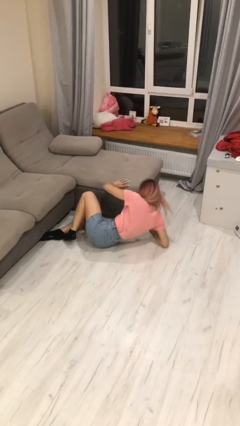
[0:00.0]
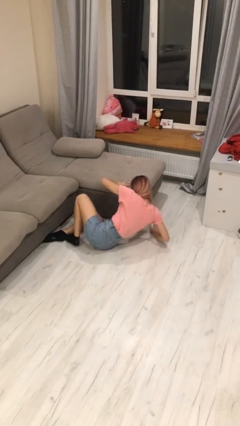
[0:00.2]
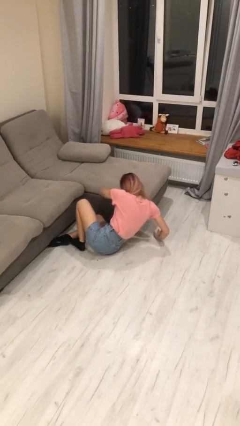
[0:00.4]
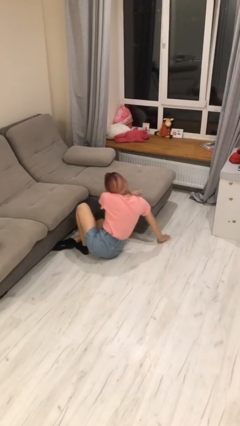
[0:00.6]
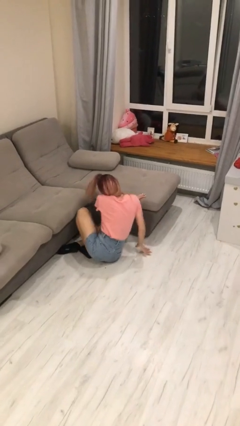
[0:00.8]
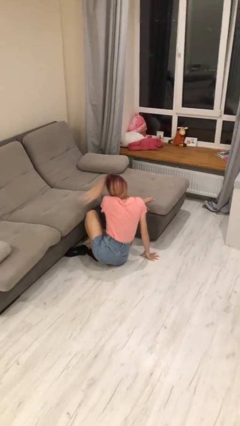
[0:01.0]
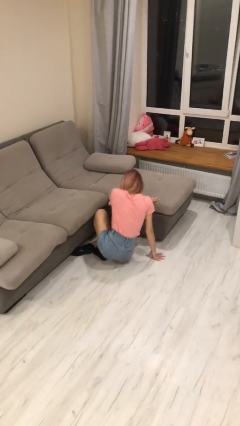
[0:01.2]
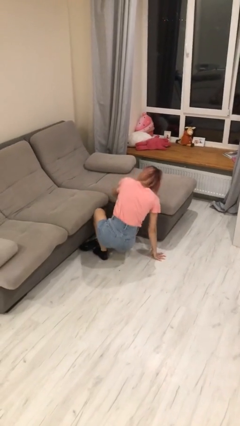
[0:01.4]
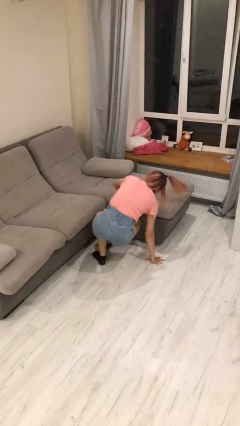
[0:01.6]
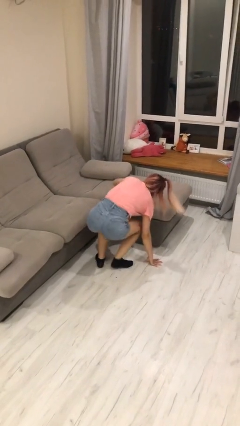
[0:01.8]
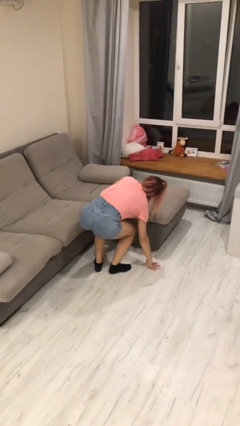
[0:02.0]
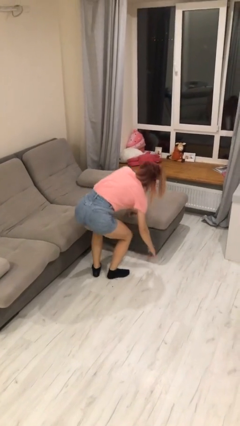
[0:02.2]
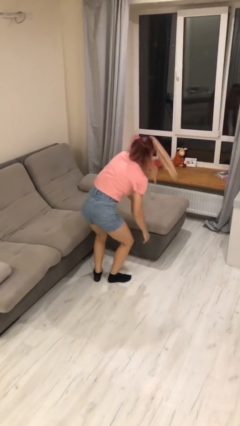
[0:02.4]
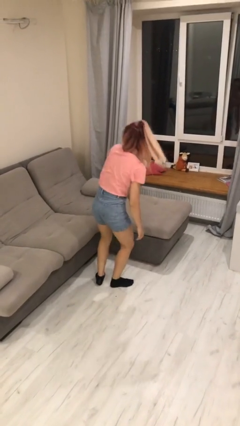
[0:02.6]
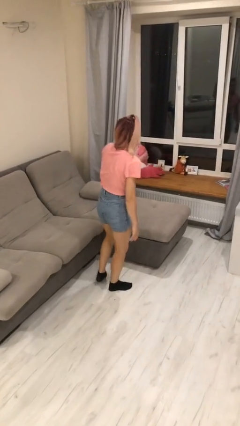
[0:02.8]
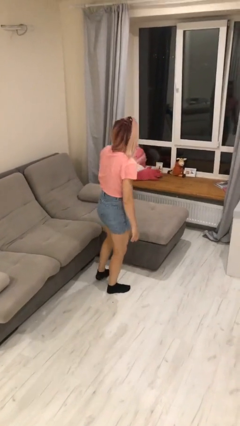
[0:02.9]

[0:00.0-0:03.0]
person stands up from floor

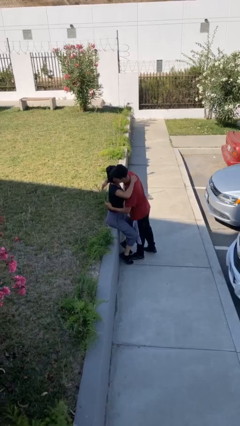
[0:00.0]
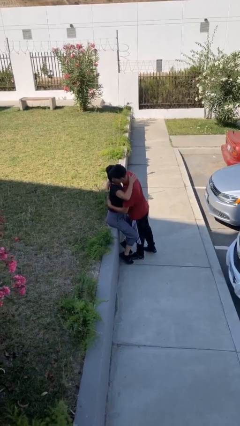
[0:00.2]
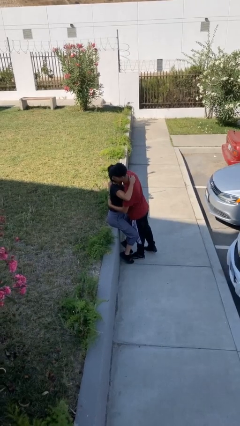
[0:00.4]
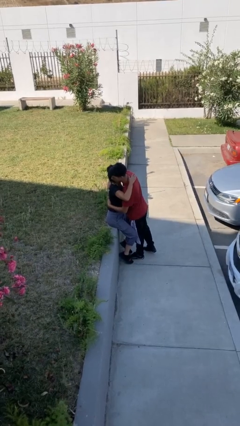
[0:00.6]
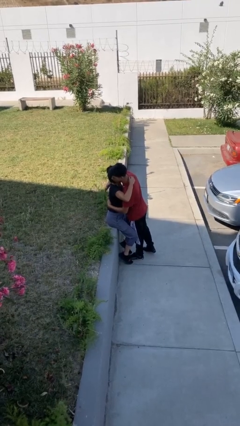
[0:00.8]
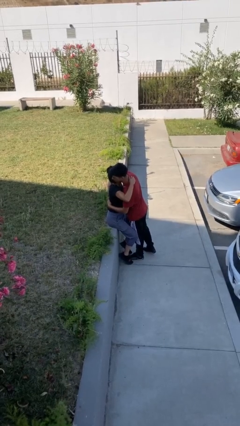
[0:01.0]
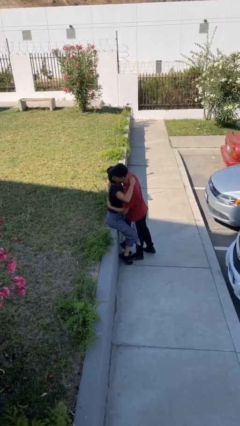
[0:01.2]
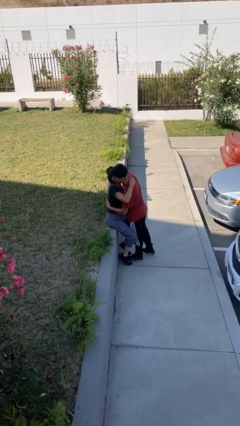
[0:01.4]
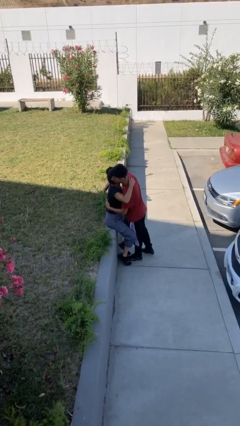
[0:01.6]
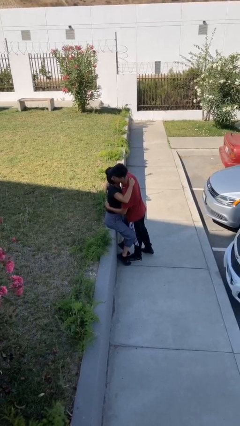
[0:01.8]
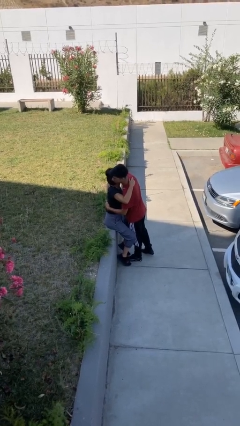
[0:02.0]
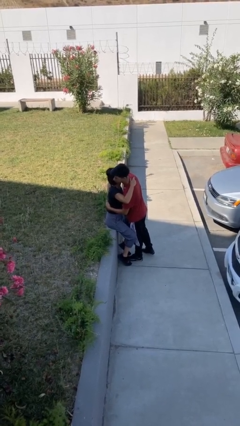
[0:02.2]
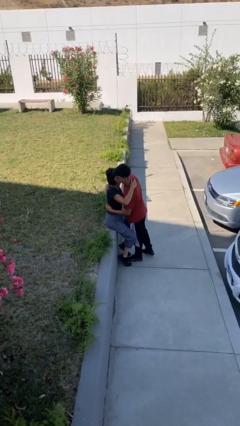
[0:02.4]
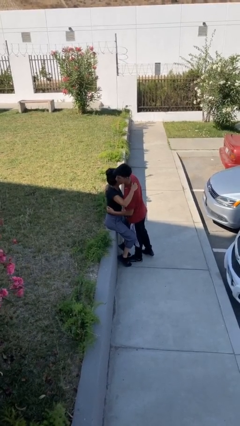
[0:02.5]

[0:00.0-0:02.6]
person embraces person

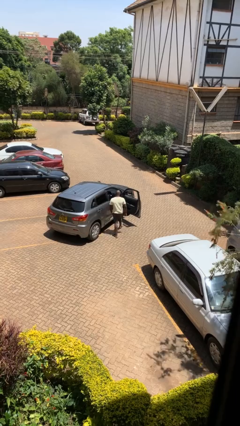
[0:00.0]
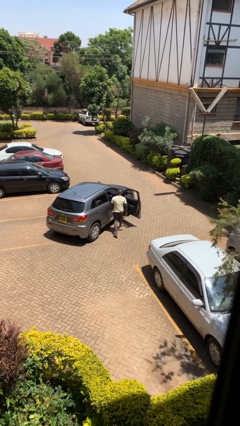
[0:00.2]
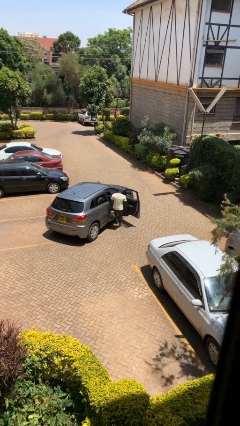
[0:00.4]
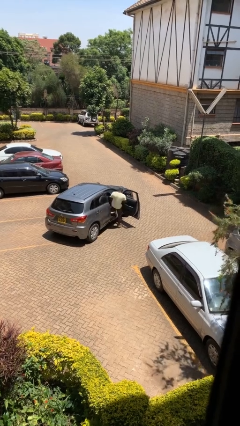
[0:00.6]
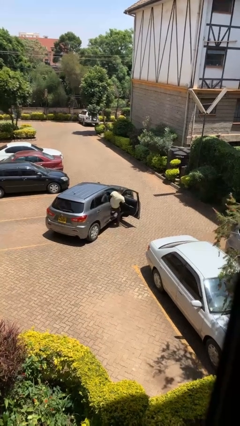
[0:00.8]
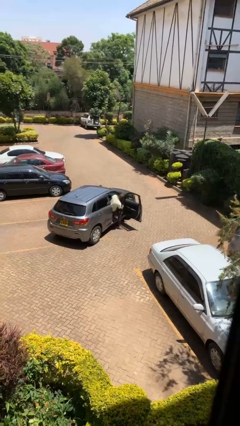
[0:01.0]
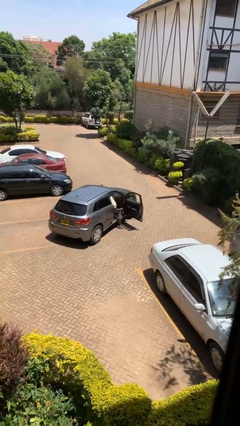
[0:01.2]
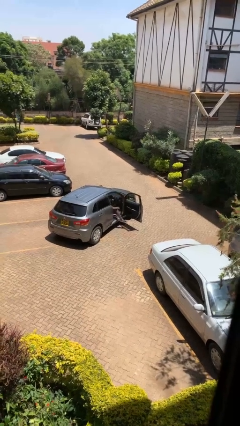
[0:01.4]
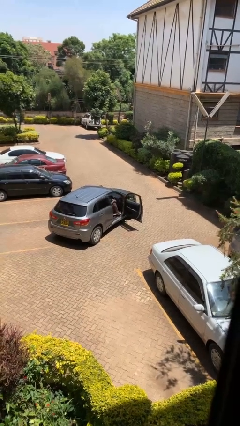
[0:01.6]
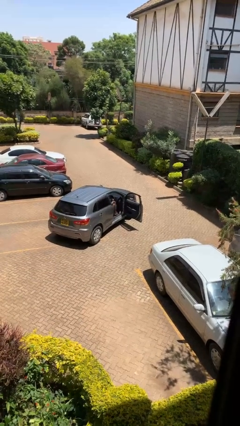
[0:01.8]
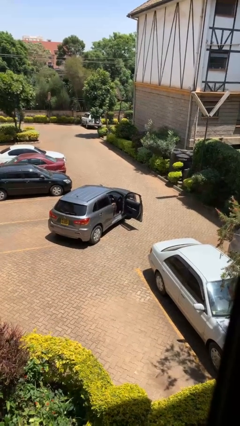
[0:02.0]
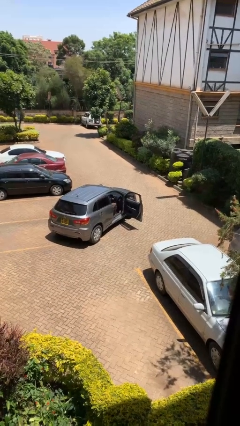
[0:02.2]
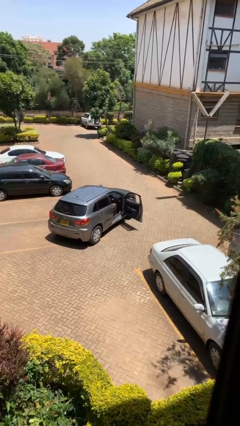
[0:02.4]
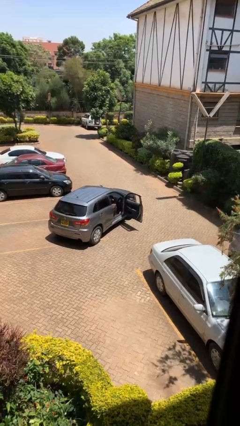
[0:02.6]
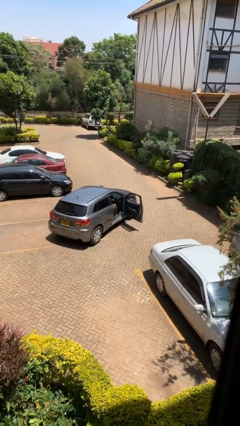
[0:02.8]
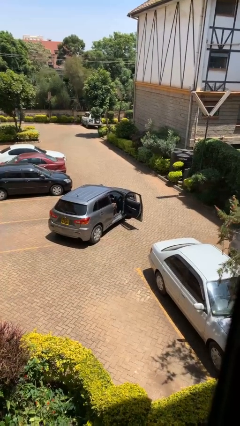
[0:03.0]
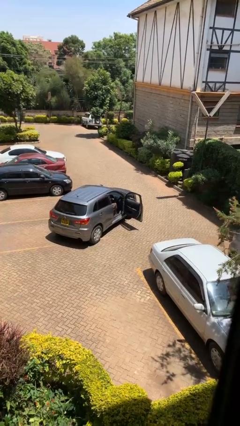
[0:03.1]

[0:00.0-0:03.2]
person enters car

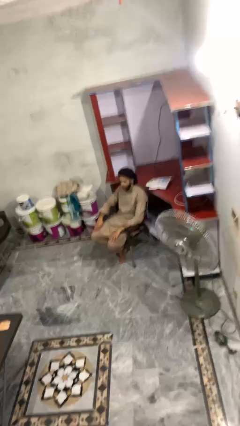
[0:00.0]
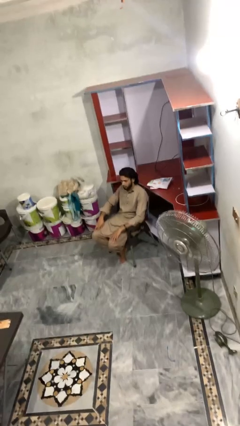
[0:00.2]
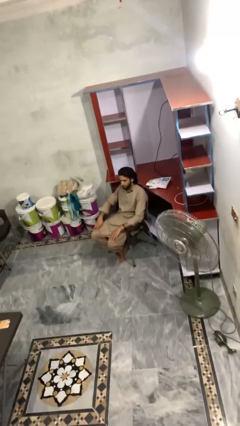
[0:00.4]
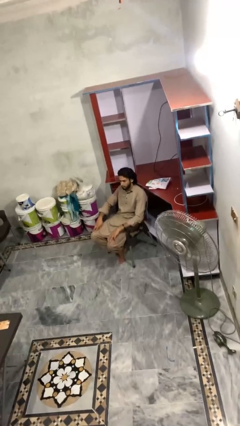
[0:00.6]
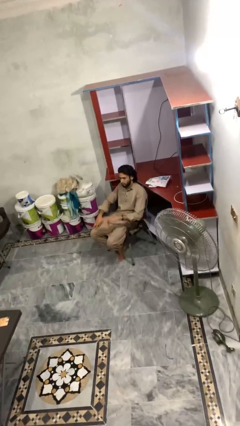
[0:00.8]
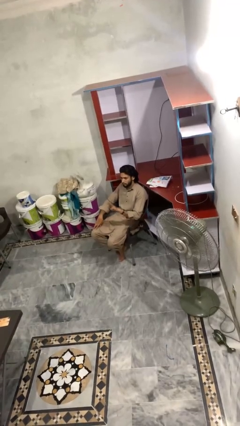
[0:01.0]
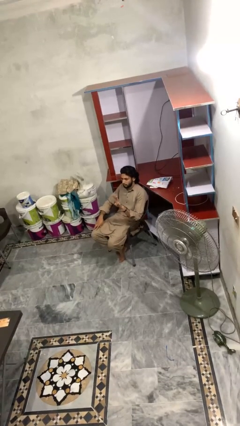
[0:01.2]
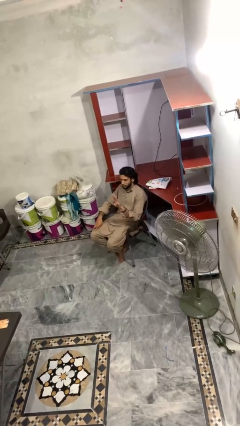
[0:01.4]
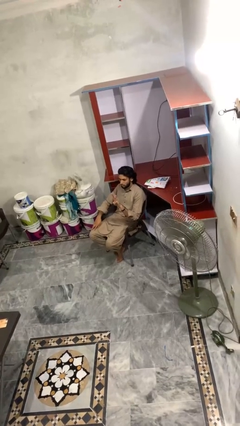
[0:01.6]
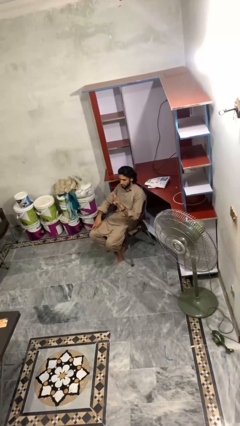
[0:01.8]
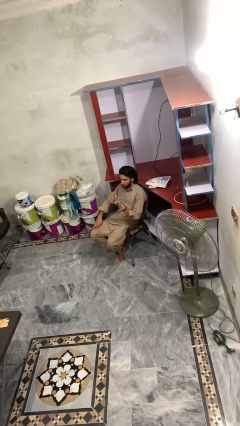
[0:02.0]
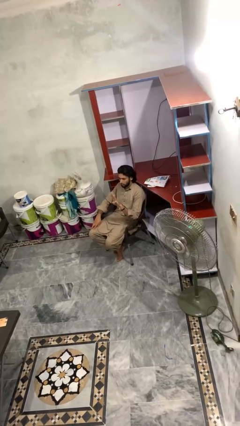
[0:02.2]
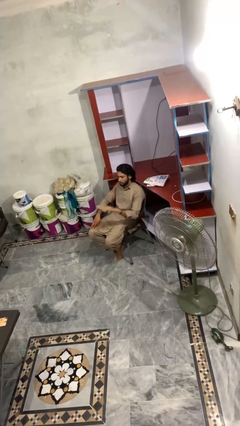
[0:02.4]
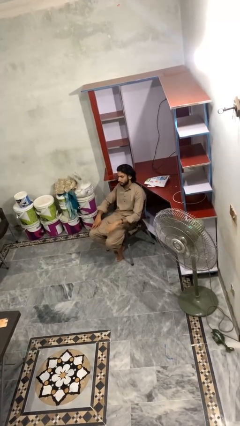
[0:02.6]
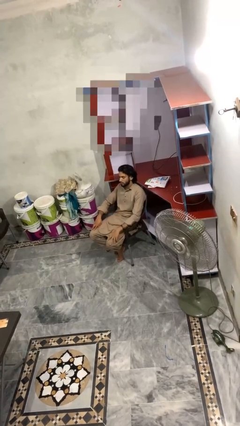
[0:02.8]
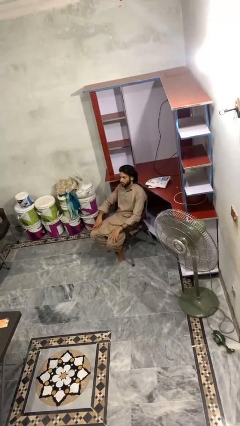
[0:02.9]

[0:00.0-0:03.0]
person gestures number three

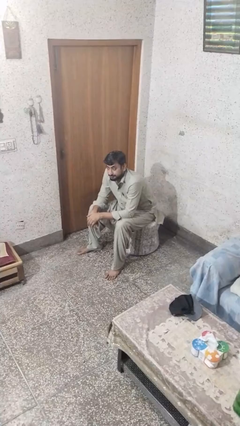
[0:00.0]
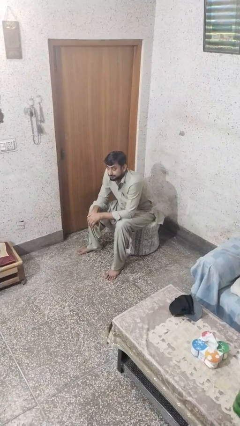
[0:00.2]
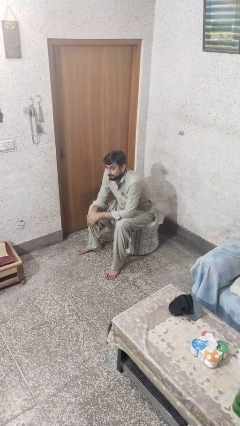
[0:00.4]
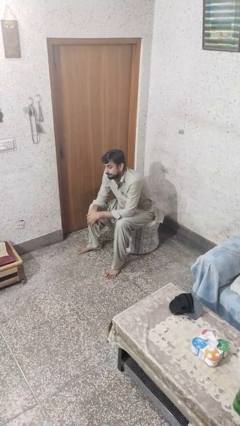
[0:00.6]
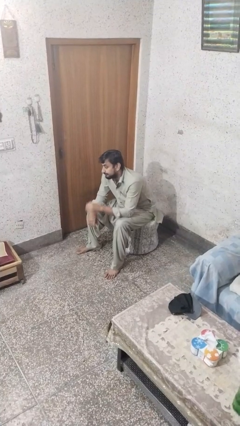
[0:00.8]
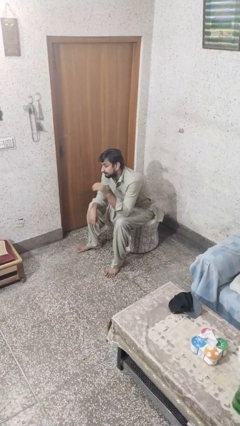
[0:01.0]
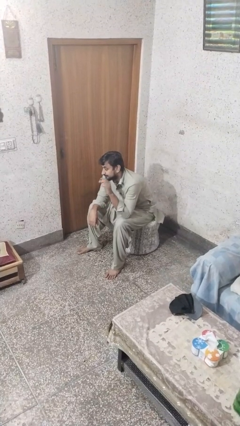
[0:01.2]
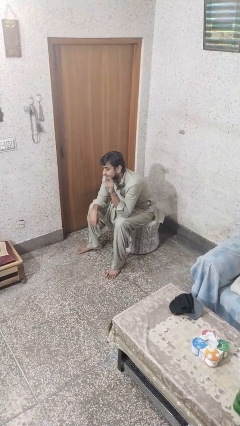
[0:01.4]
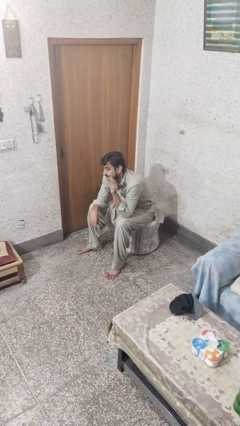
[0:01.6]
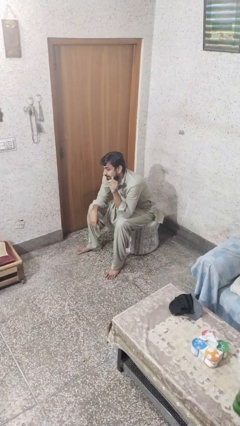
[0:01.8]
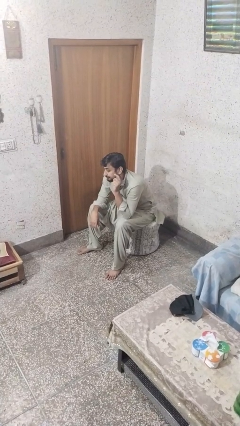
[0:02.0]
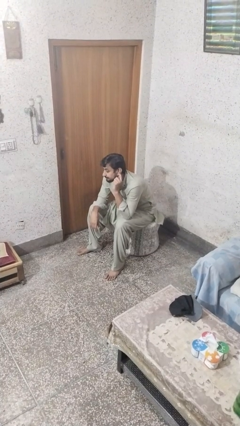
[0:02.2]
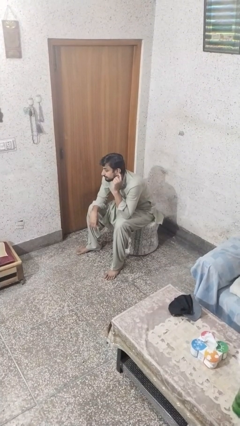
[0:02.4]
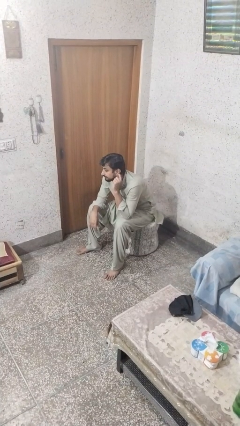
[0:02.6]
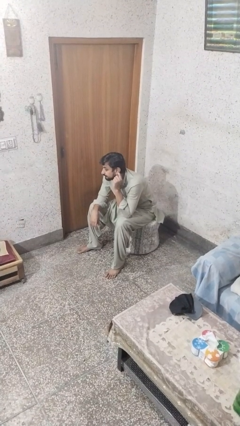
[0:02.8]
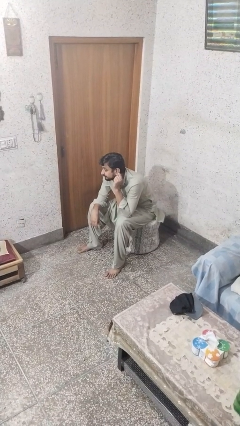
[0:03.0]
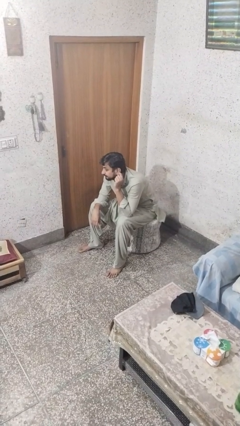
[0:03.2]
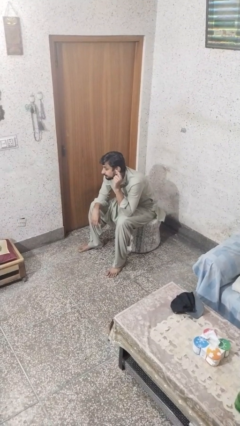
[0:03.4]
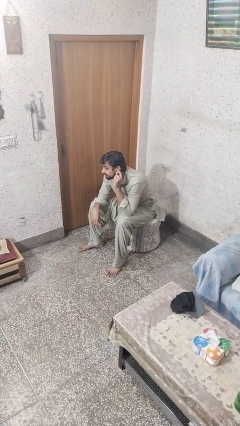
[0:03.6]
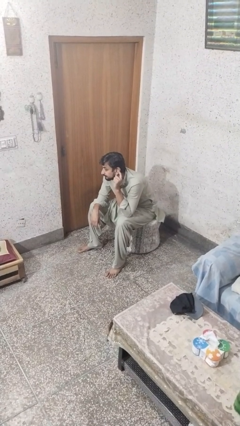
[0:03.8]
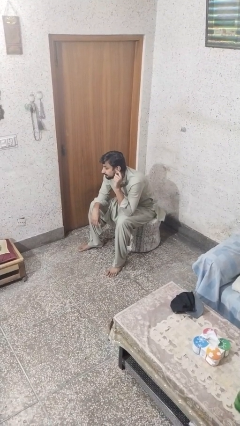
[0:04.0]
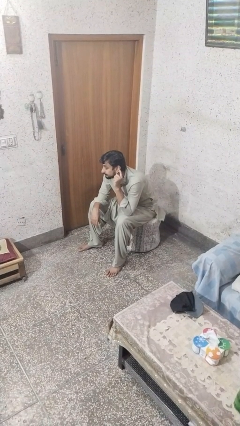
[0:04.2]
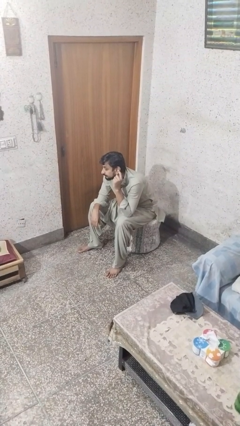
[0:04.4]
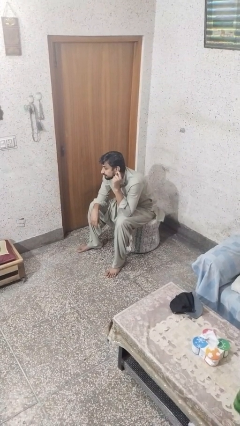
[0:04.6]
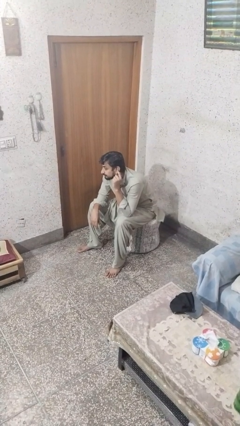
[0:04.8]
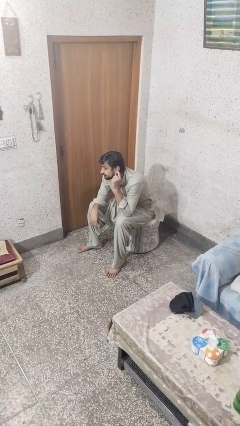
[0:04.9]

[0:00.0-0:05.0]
person gestures listen closely

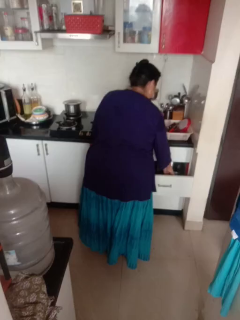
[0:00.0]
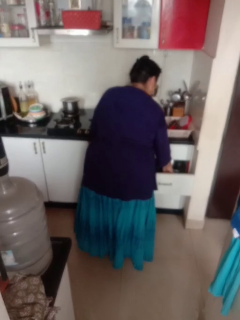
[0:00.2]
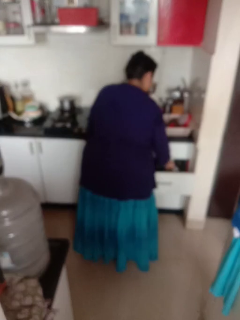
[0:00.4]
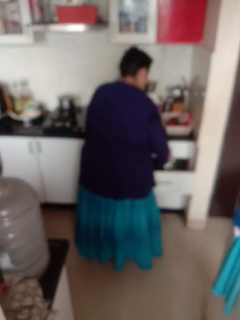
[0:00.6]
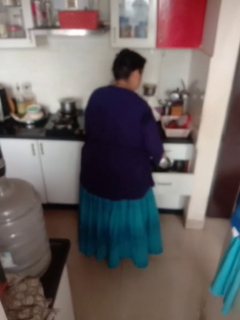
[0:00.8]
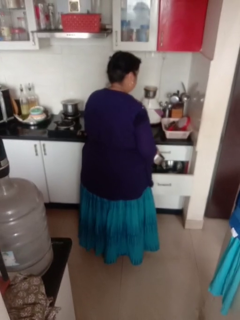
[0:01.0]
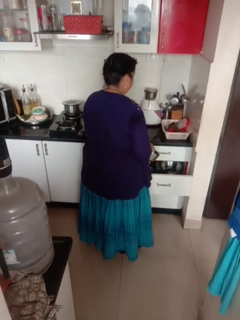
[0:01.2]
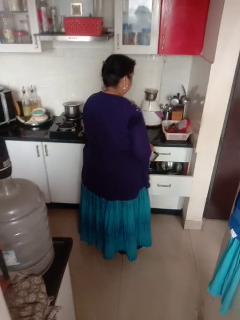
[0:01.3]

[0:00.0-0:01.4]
person takes object from kitchen drawer
